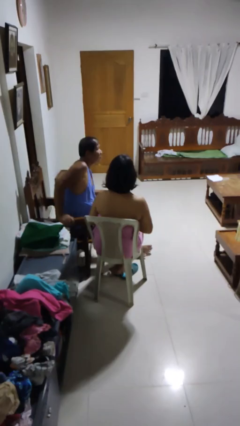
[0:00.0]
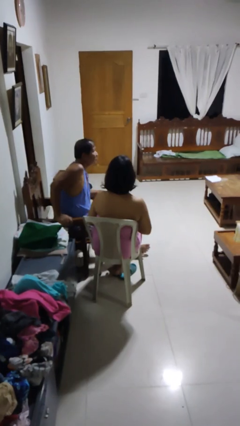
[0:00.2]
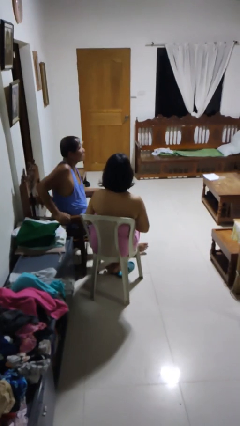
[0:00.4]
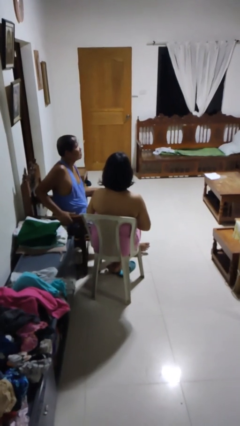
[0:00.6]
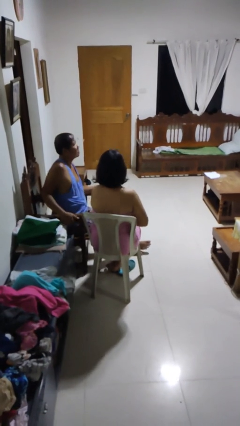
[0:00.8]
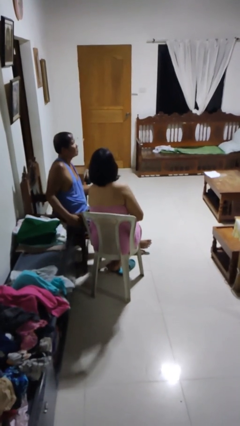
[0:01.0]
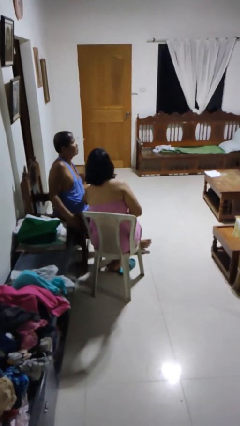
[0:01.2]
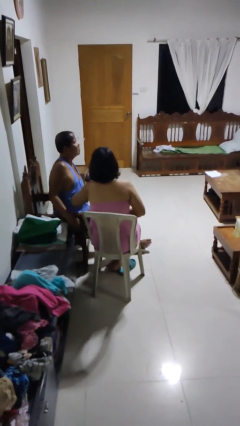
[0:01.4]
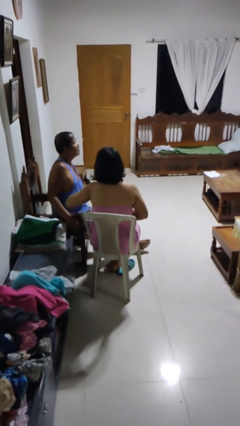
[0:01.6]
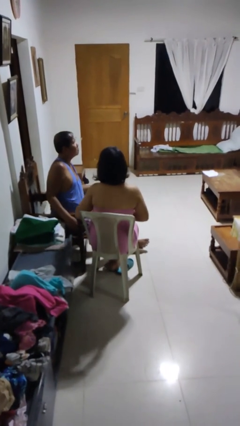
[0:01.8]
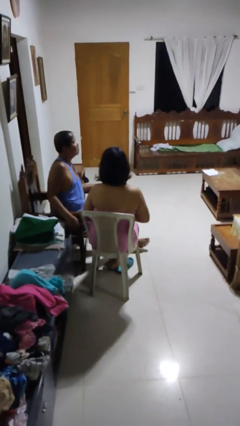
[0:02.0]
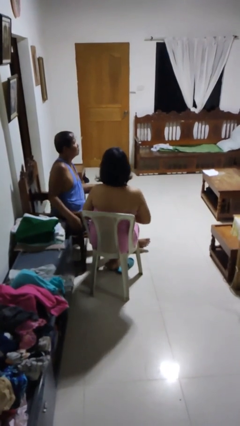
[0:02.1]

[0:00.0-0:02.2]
person nudges person with elbow

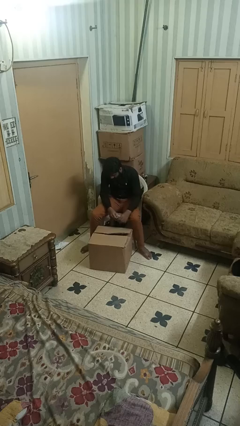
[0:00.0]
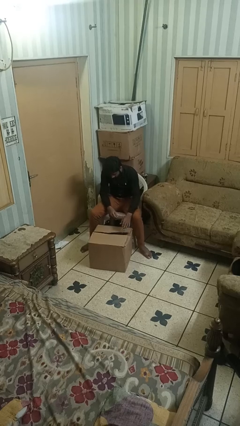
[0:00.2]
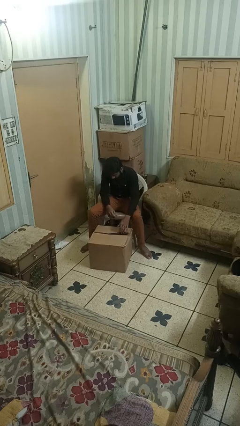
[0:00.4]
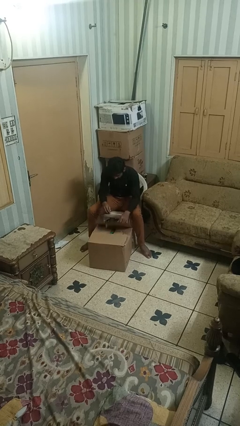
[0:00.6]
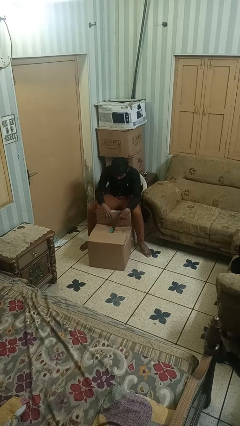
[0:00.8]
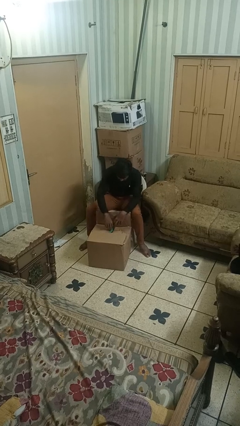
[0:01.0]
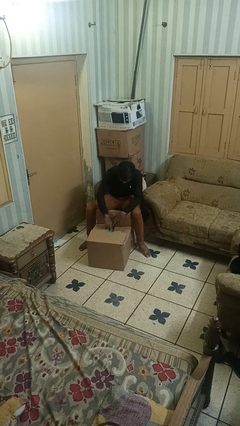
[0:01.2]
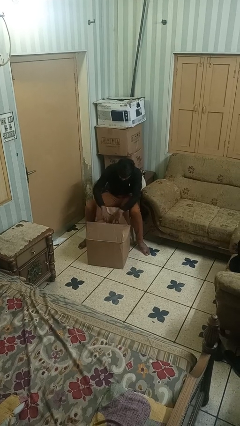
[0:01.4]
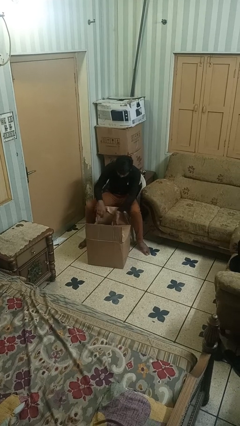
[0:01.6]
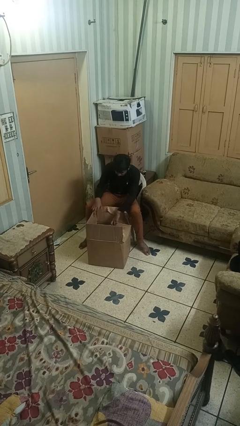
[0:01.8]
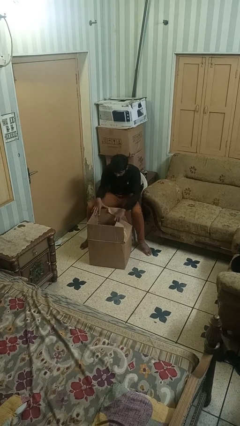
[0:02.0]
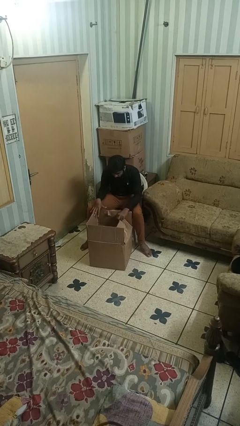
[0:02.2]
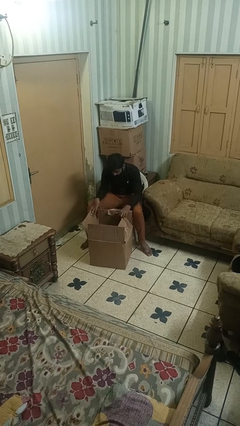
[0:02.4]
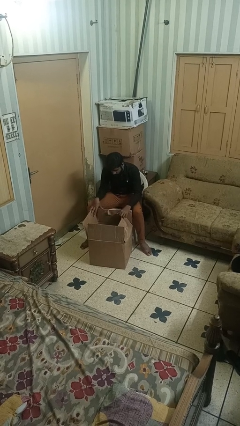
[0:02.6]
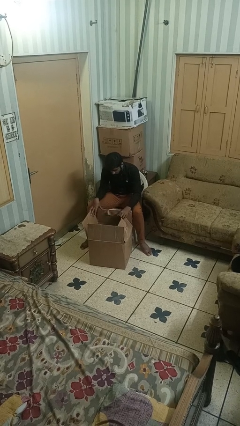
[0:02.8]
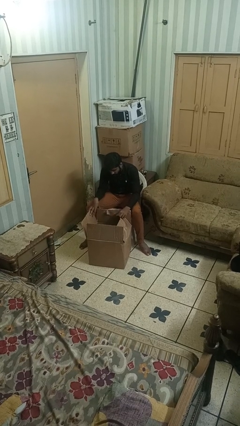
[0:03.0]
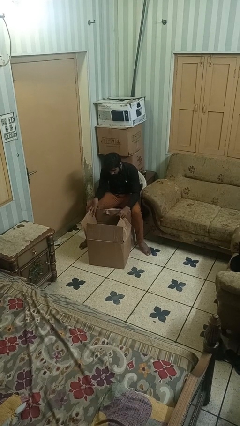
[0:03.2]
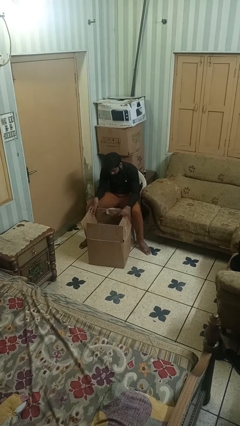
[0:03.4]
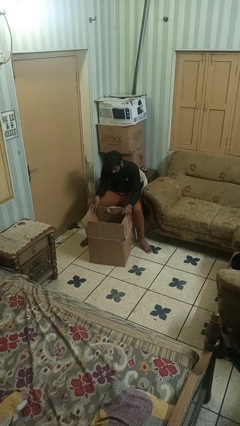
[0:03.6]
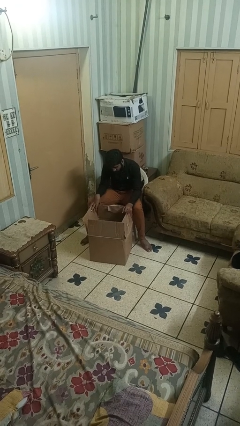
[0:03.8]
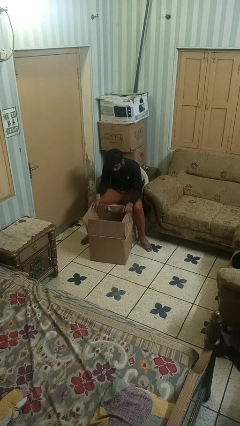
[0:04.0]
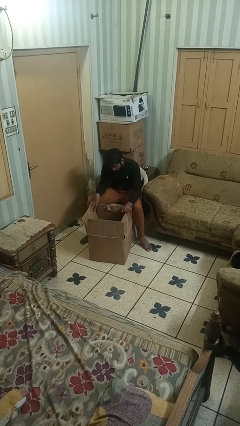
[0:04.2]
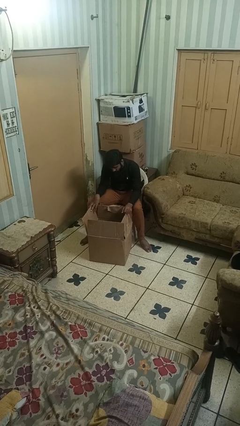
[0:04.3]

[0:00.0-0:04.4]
person opens box

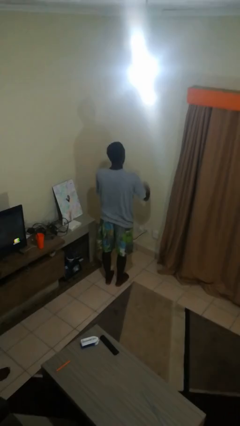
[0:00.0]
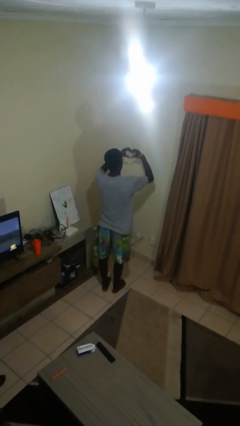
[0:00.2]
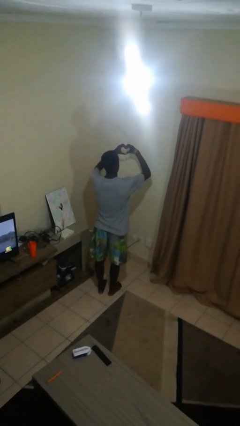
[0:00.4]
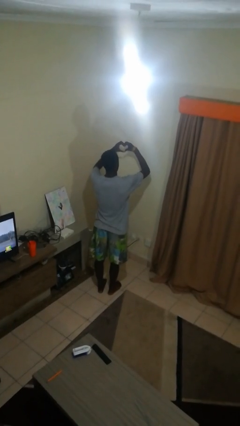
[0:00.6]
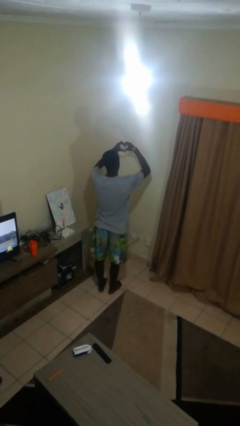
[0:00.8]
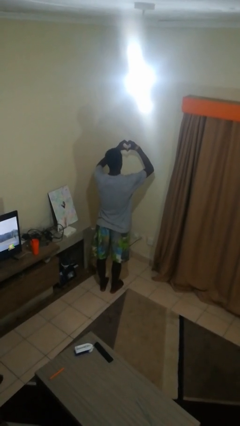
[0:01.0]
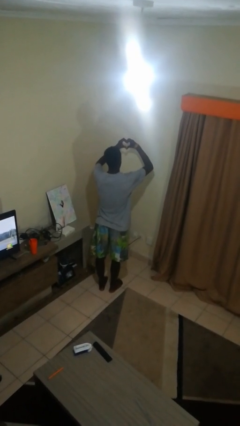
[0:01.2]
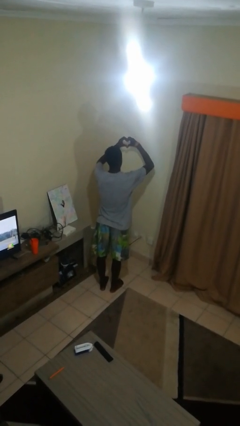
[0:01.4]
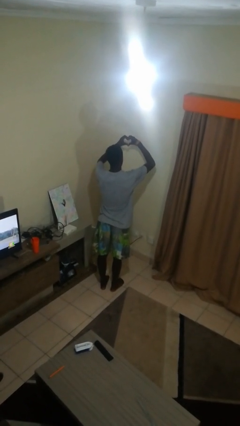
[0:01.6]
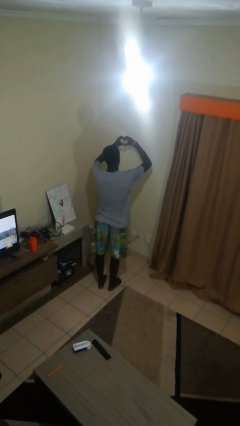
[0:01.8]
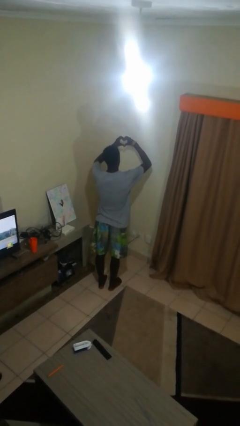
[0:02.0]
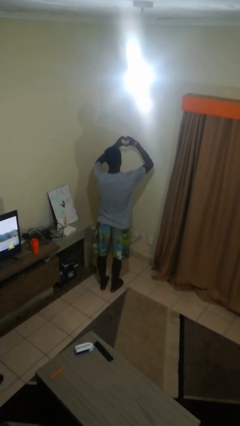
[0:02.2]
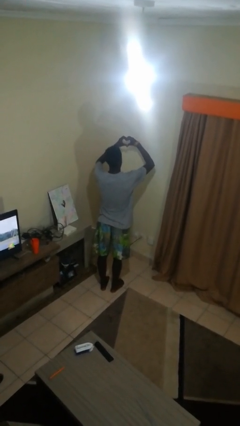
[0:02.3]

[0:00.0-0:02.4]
person gestures heart

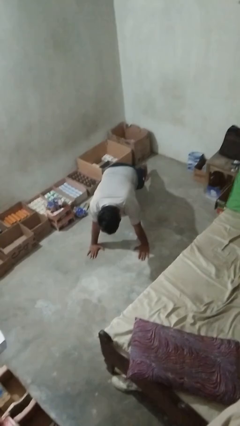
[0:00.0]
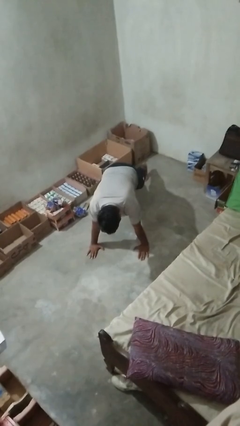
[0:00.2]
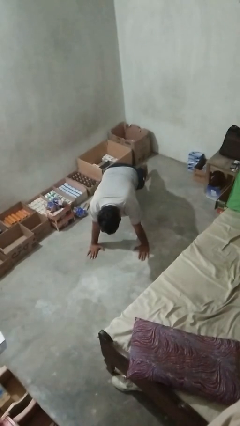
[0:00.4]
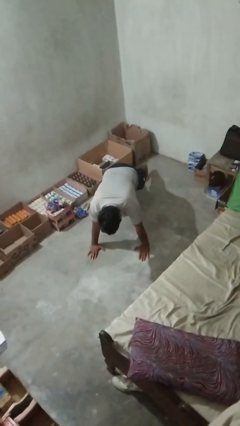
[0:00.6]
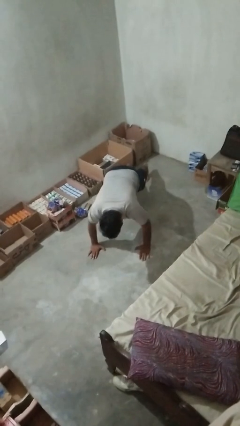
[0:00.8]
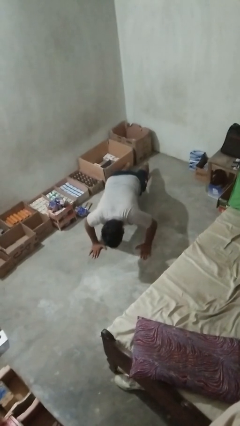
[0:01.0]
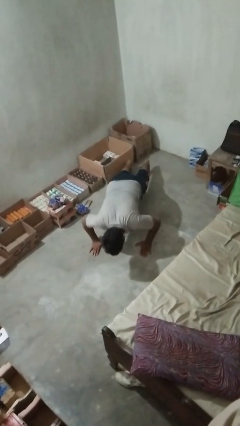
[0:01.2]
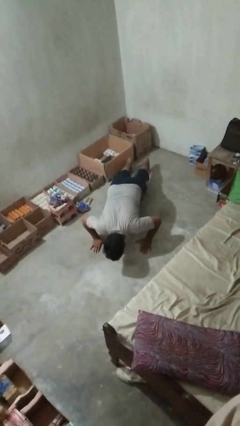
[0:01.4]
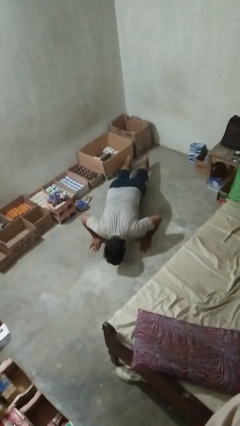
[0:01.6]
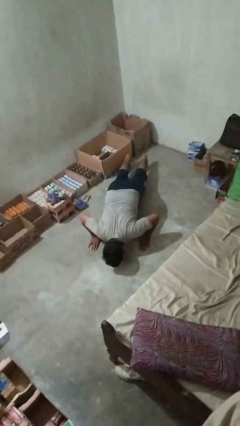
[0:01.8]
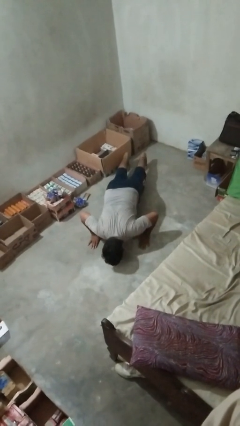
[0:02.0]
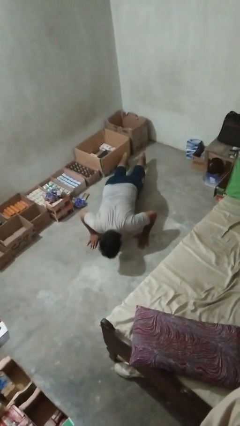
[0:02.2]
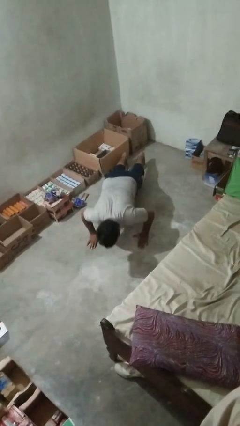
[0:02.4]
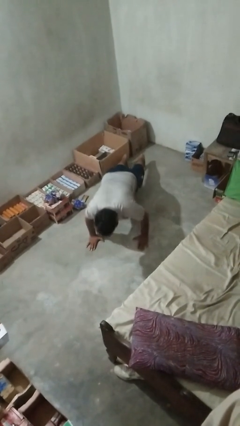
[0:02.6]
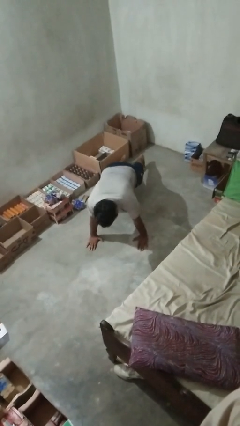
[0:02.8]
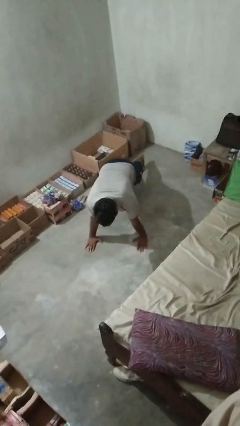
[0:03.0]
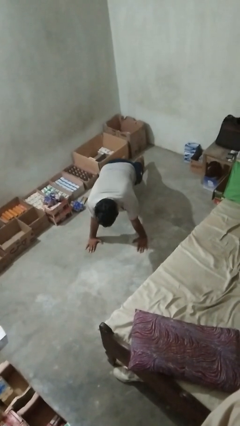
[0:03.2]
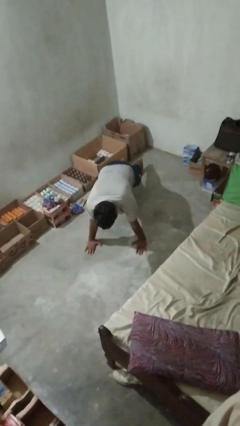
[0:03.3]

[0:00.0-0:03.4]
person exercises with pushup

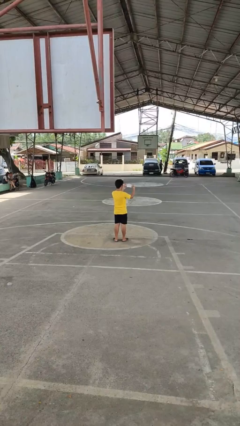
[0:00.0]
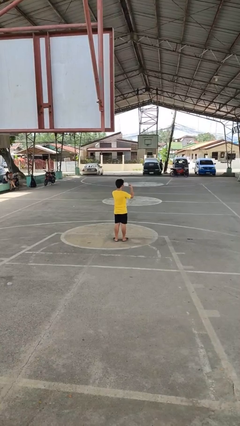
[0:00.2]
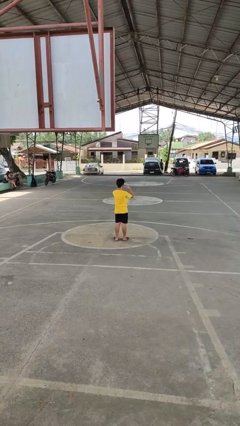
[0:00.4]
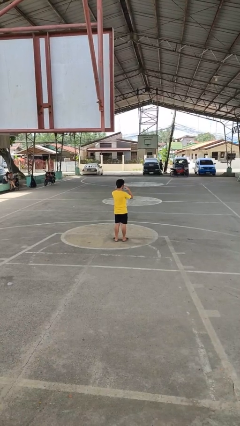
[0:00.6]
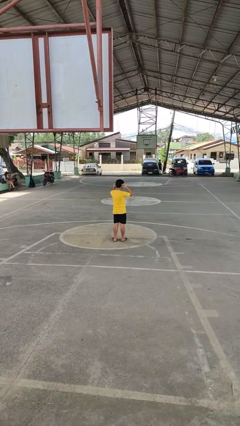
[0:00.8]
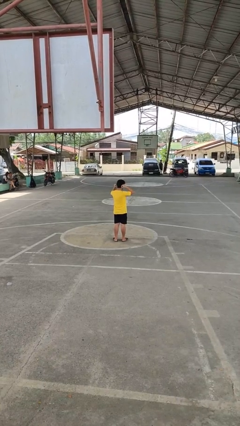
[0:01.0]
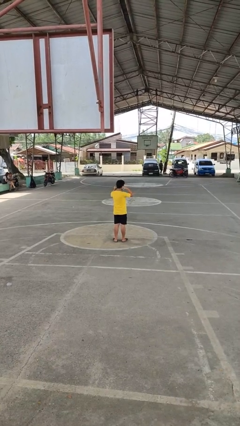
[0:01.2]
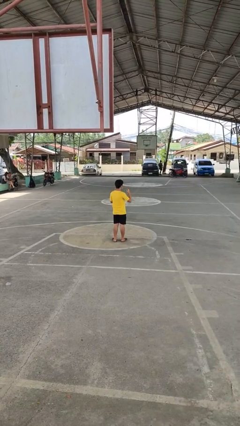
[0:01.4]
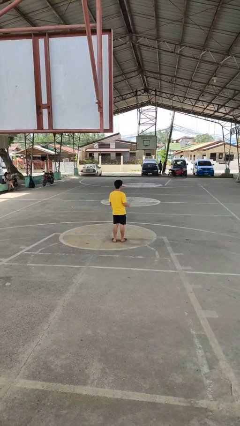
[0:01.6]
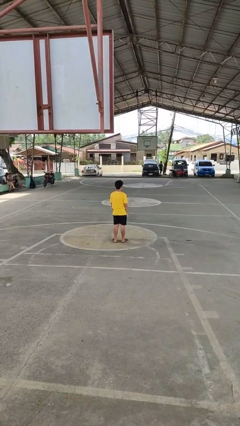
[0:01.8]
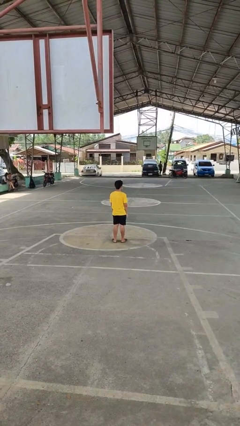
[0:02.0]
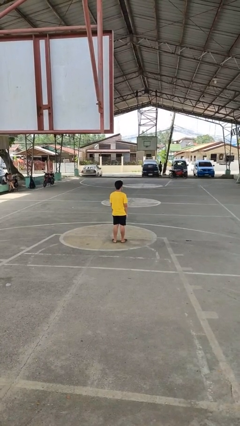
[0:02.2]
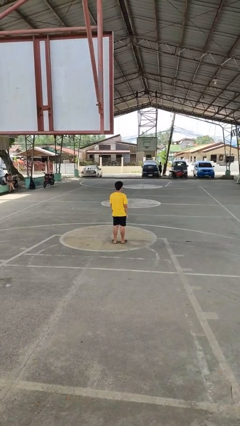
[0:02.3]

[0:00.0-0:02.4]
person puts on facemask

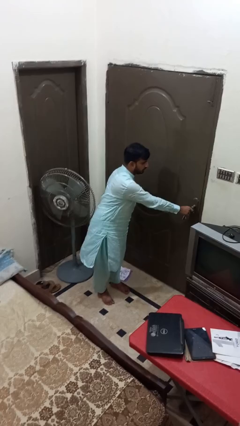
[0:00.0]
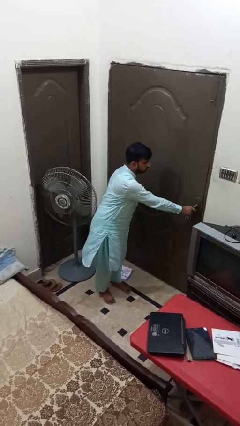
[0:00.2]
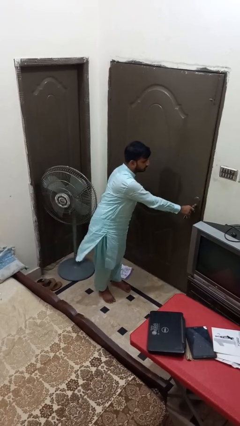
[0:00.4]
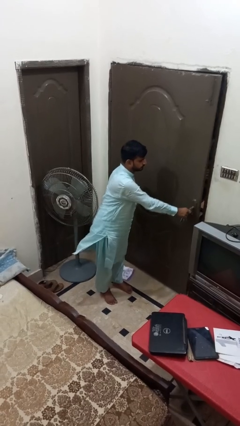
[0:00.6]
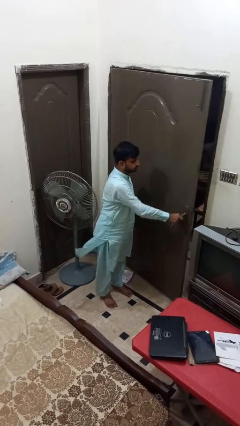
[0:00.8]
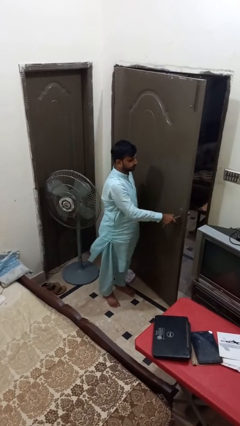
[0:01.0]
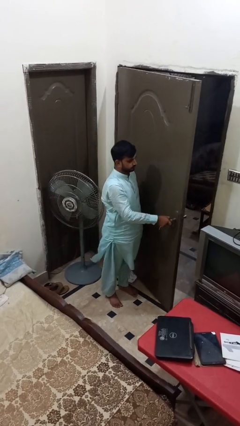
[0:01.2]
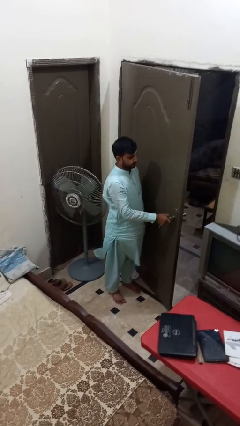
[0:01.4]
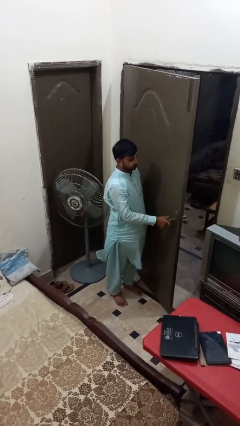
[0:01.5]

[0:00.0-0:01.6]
person opens facility door

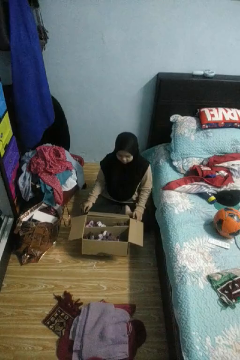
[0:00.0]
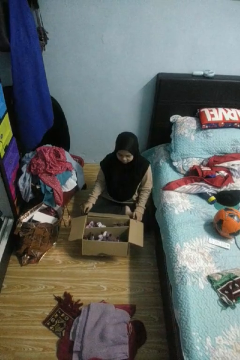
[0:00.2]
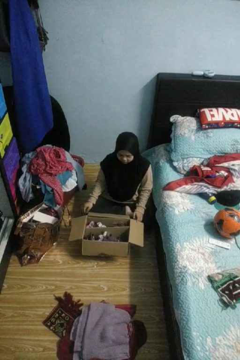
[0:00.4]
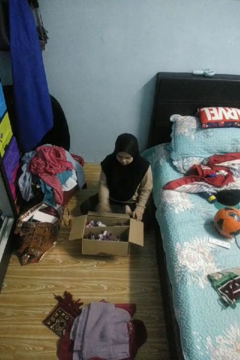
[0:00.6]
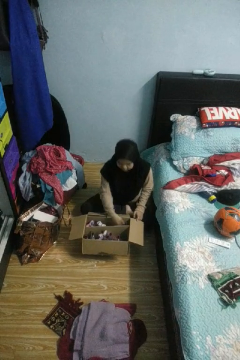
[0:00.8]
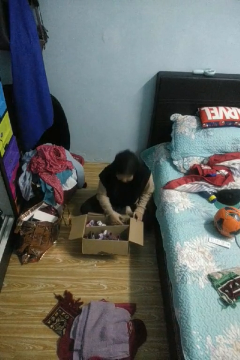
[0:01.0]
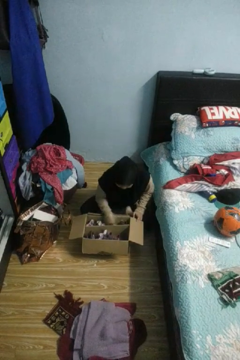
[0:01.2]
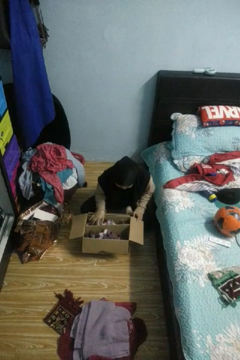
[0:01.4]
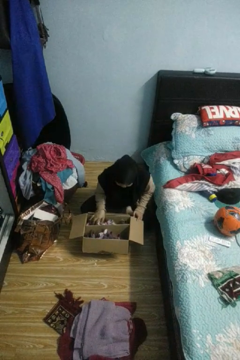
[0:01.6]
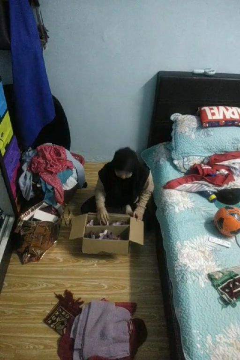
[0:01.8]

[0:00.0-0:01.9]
person searches in box
